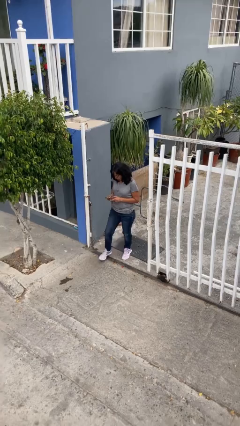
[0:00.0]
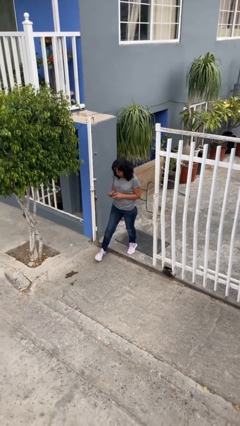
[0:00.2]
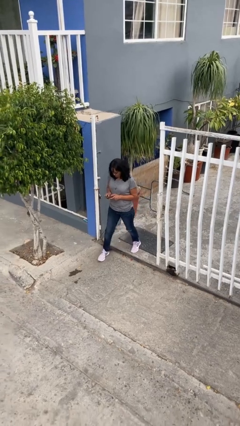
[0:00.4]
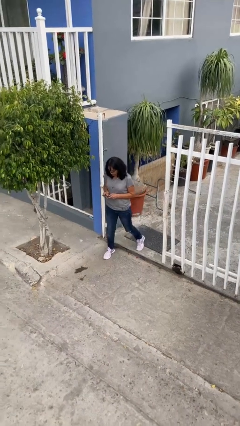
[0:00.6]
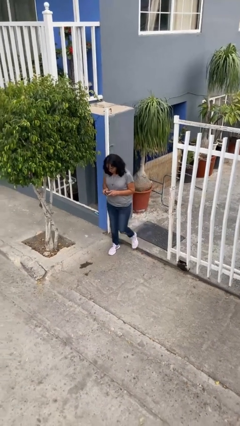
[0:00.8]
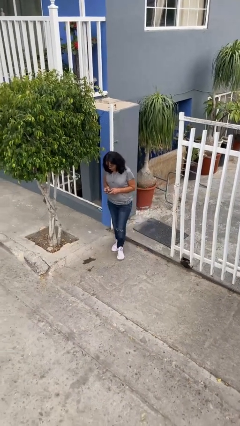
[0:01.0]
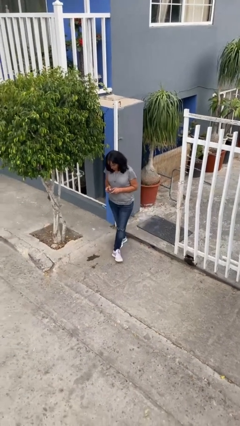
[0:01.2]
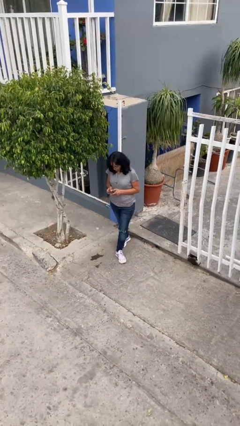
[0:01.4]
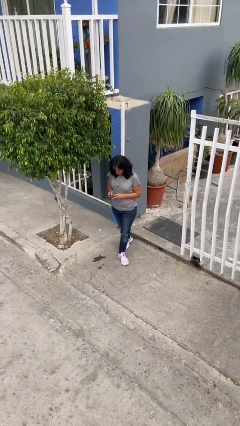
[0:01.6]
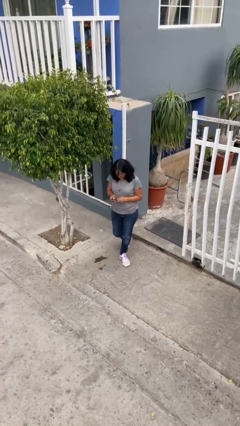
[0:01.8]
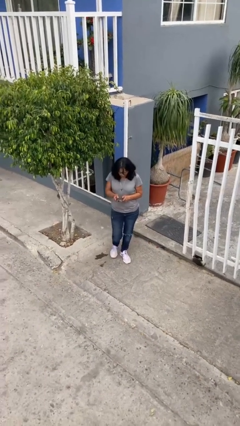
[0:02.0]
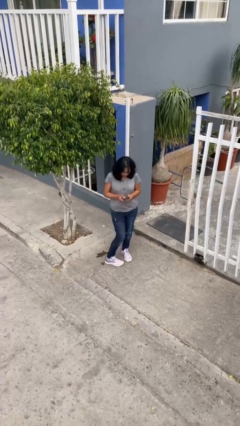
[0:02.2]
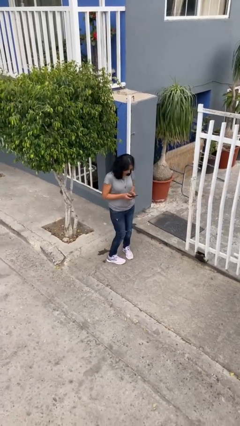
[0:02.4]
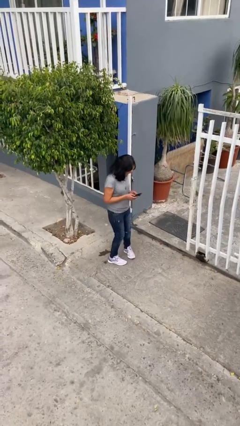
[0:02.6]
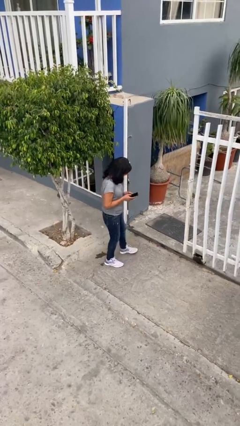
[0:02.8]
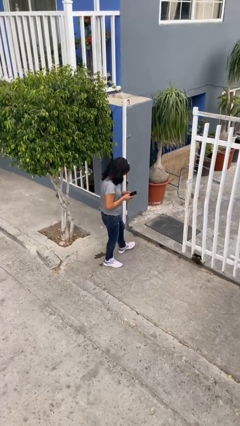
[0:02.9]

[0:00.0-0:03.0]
person enters scene through structure

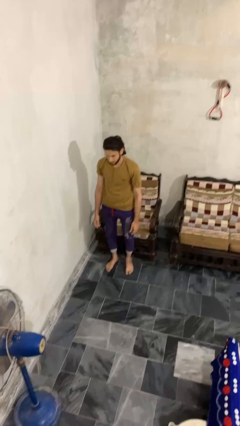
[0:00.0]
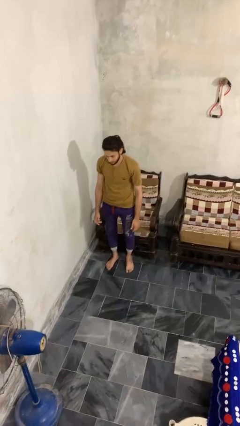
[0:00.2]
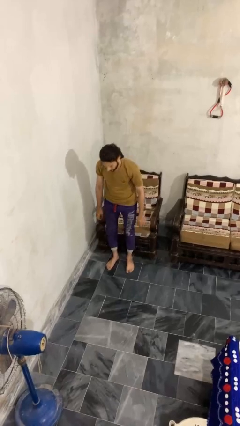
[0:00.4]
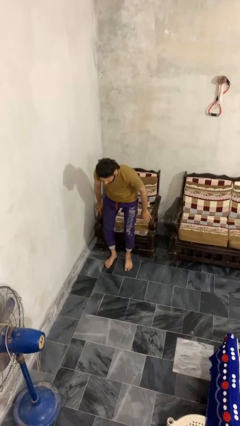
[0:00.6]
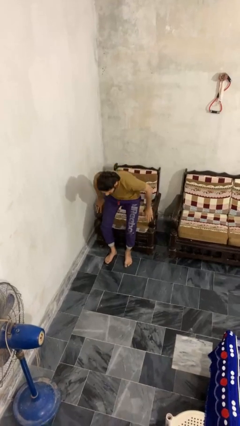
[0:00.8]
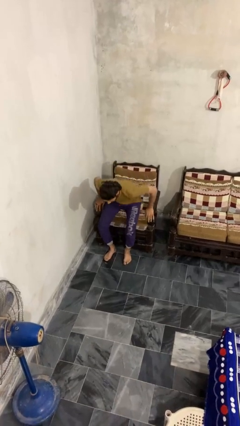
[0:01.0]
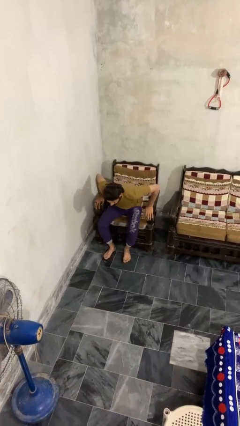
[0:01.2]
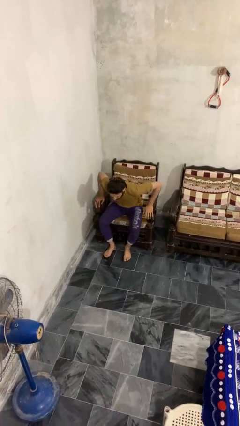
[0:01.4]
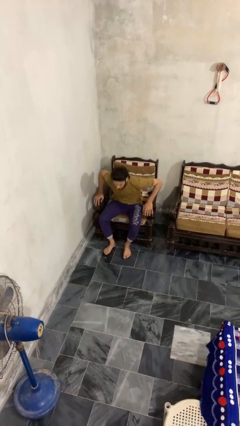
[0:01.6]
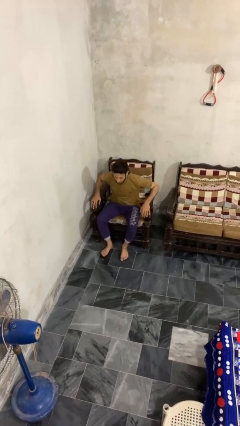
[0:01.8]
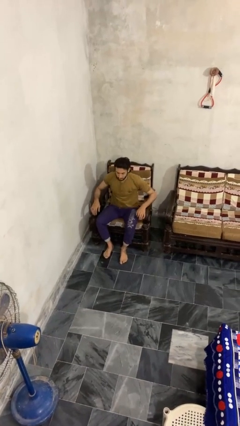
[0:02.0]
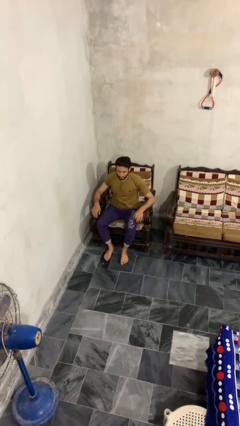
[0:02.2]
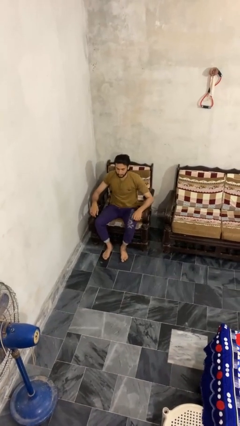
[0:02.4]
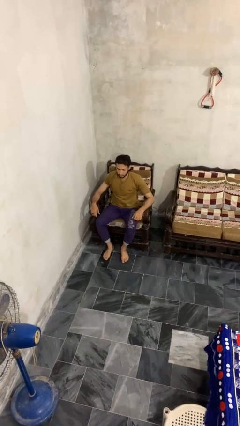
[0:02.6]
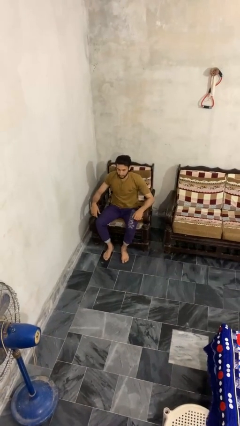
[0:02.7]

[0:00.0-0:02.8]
person sits down

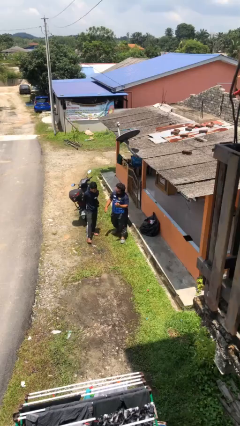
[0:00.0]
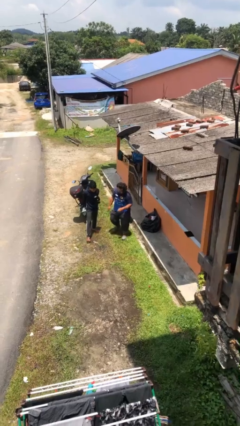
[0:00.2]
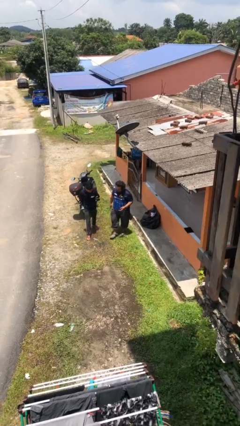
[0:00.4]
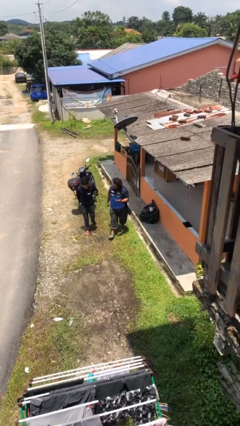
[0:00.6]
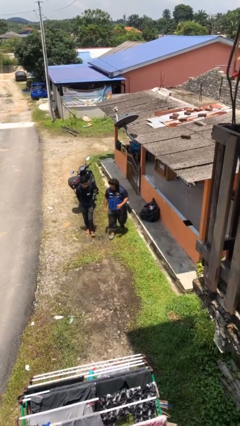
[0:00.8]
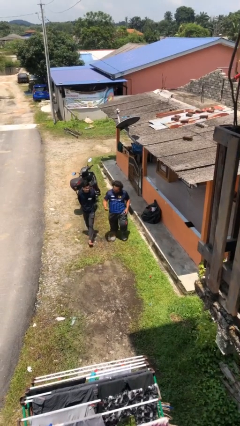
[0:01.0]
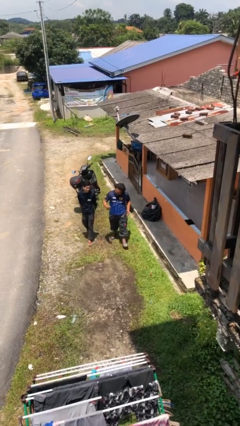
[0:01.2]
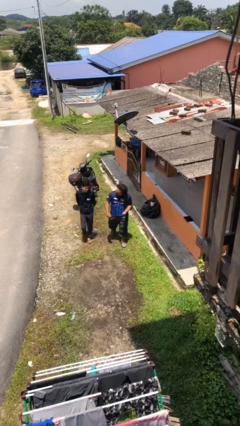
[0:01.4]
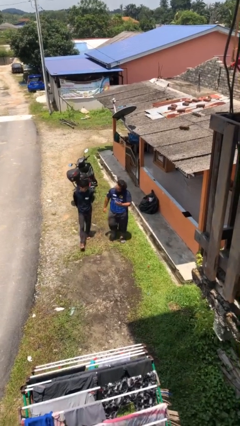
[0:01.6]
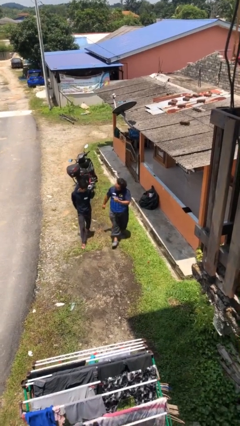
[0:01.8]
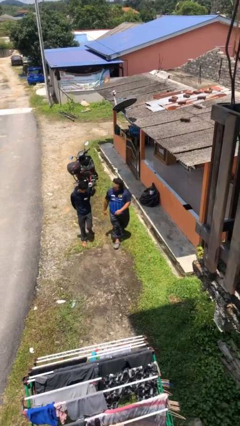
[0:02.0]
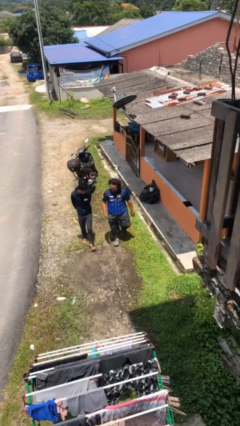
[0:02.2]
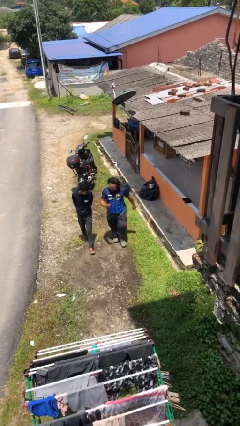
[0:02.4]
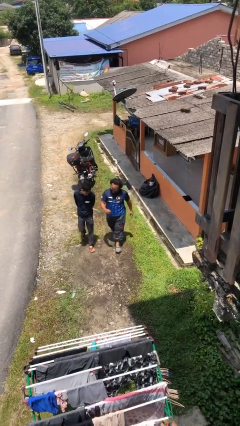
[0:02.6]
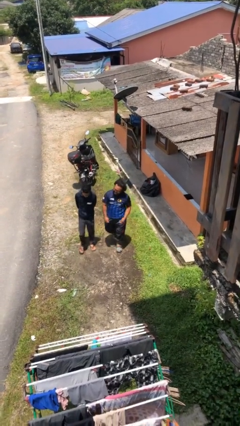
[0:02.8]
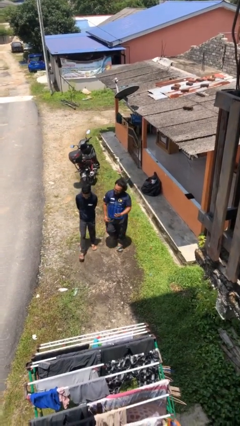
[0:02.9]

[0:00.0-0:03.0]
person talks to person

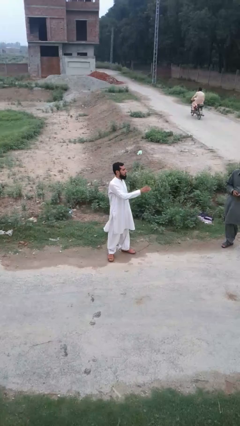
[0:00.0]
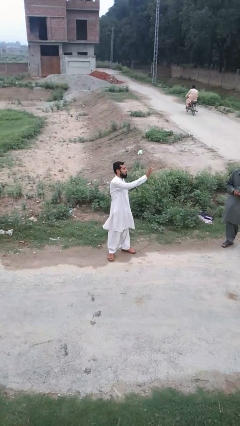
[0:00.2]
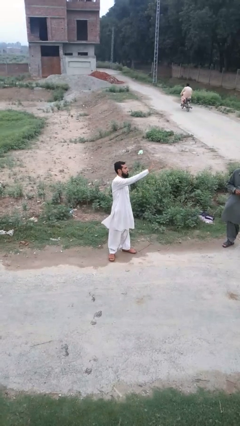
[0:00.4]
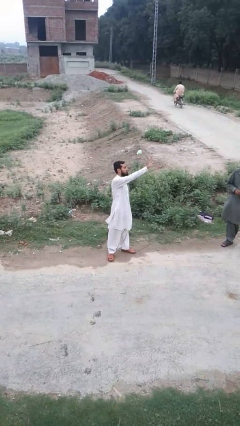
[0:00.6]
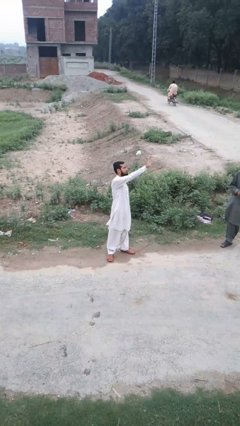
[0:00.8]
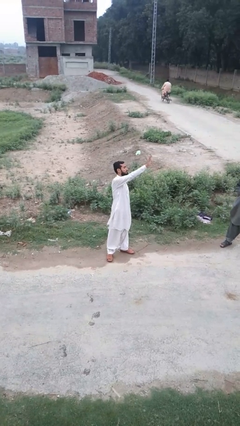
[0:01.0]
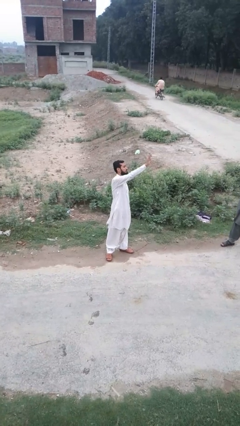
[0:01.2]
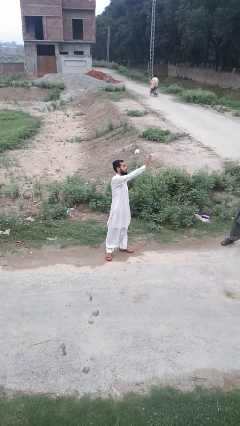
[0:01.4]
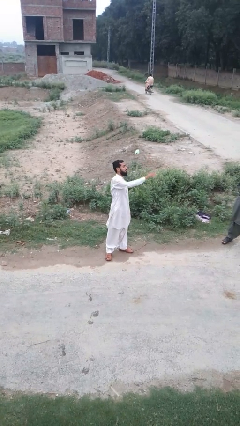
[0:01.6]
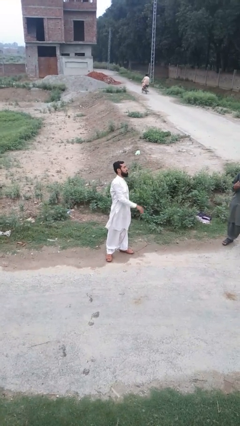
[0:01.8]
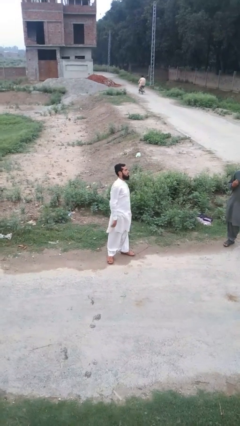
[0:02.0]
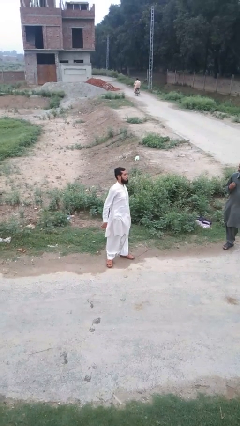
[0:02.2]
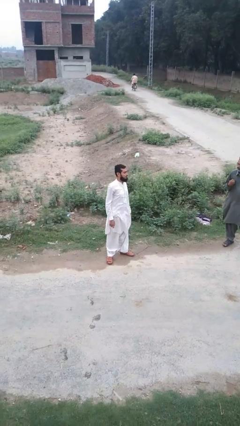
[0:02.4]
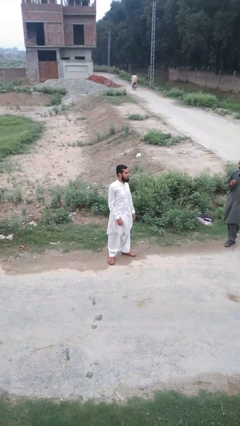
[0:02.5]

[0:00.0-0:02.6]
person waves at person

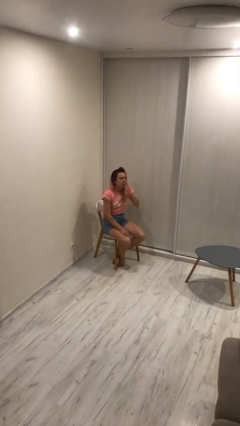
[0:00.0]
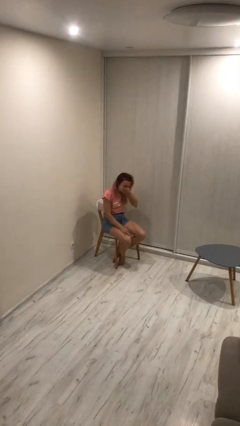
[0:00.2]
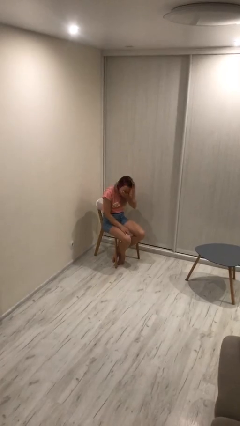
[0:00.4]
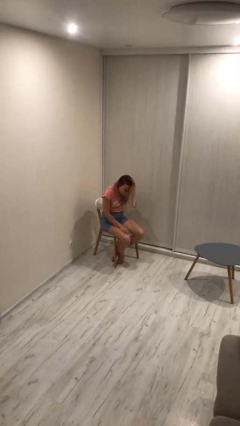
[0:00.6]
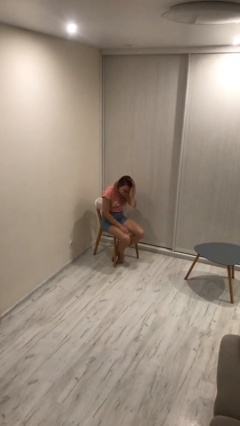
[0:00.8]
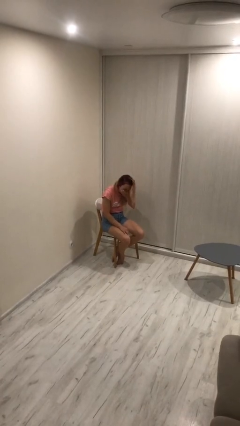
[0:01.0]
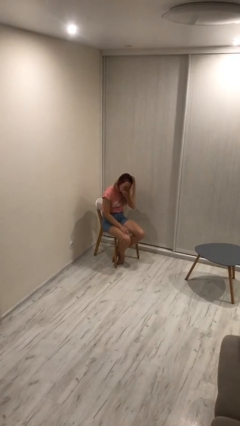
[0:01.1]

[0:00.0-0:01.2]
person sneezes into arm

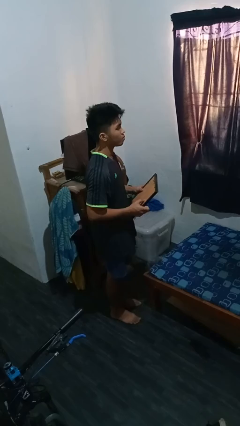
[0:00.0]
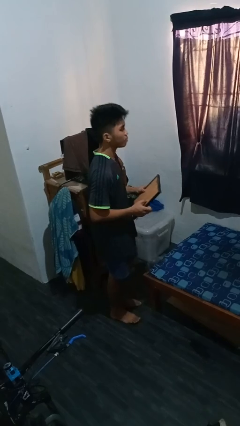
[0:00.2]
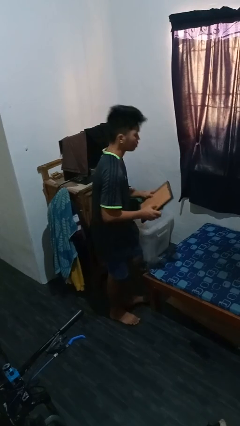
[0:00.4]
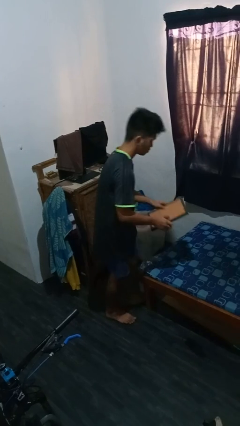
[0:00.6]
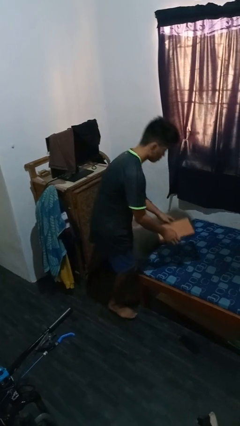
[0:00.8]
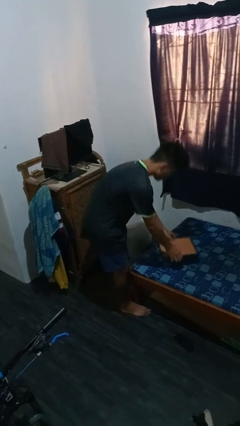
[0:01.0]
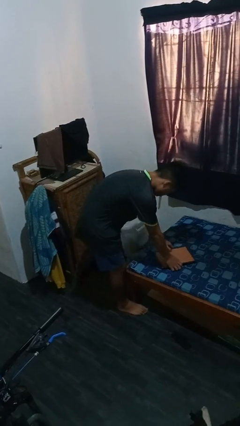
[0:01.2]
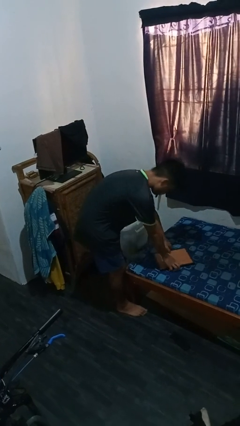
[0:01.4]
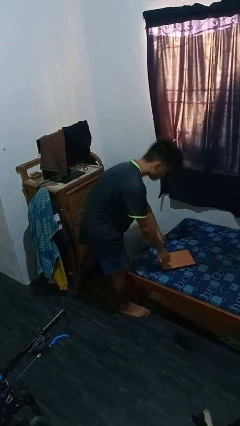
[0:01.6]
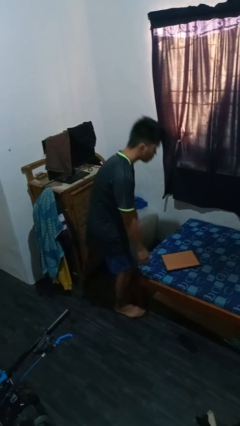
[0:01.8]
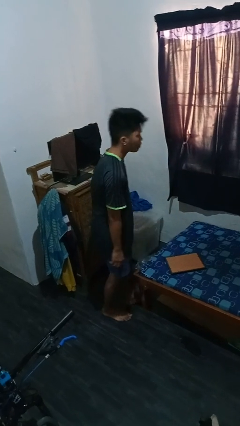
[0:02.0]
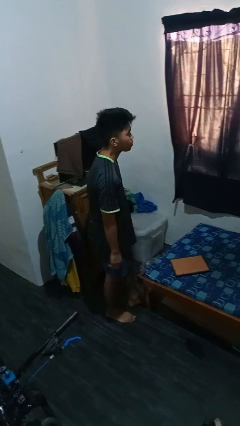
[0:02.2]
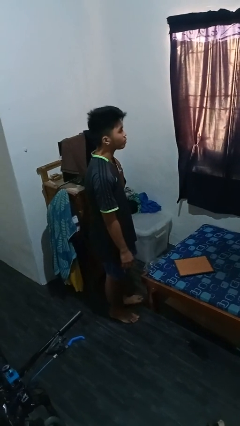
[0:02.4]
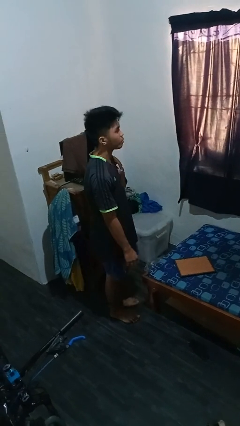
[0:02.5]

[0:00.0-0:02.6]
person puts down object on bed

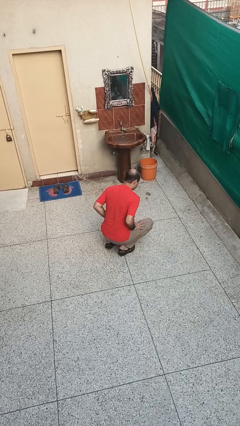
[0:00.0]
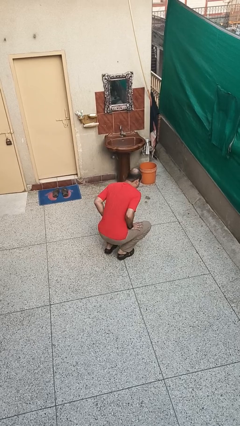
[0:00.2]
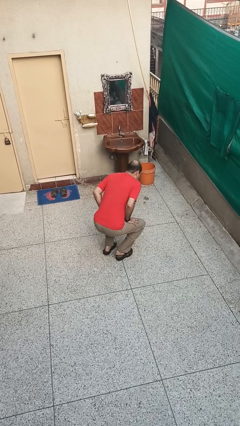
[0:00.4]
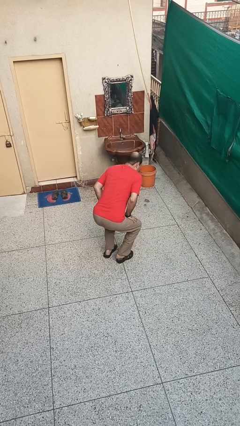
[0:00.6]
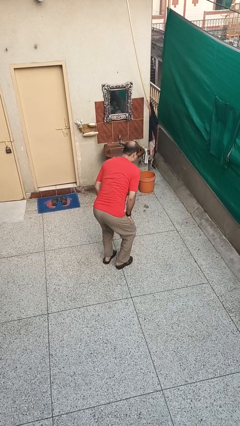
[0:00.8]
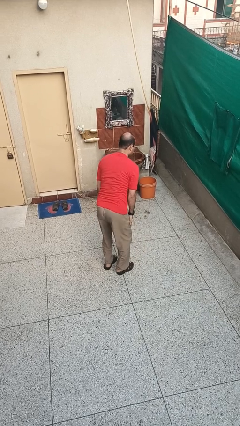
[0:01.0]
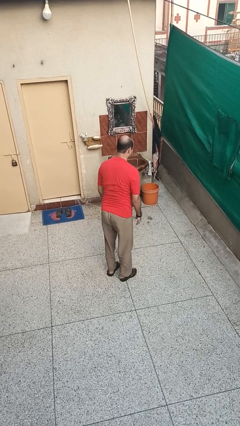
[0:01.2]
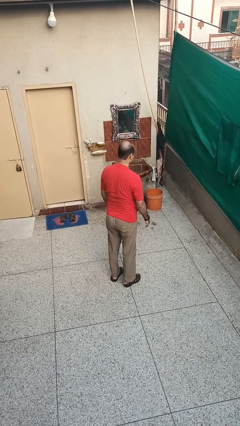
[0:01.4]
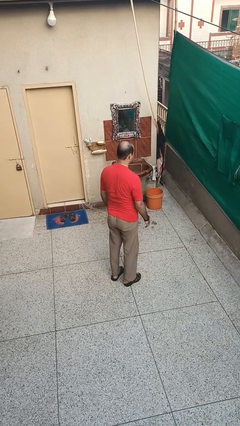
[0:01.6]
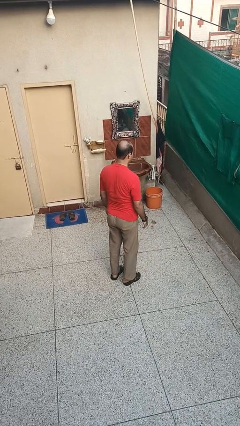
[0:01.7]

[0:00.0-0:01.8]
person stands up
